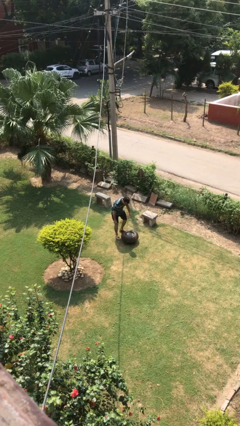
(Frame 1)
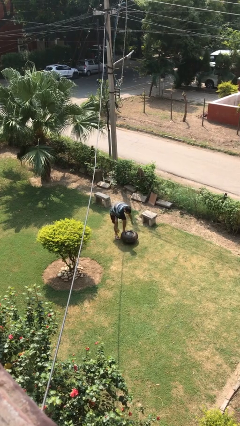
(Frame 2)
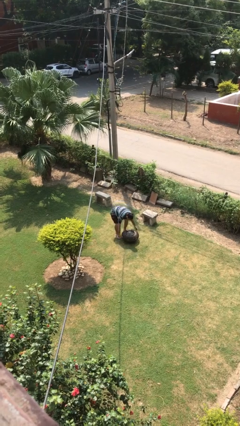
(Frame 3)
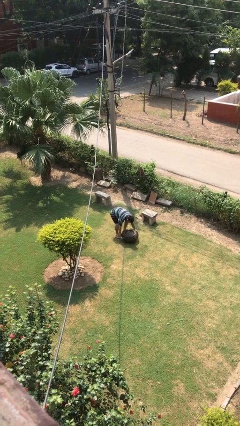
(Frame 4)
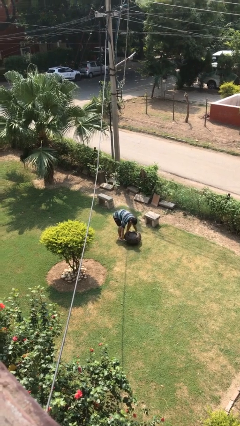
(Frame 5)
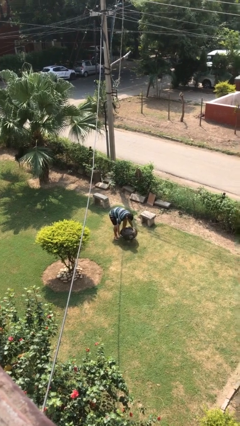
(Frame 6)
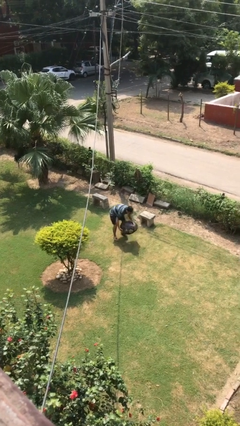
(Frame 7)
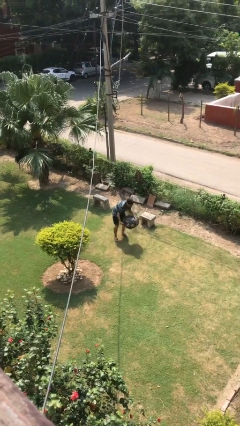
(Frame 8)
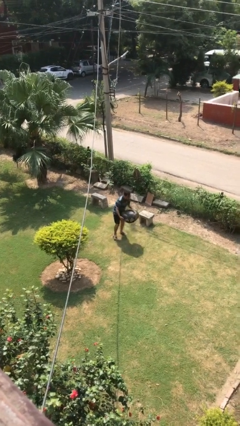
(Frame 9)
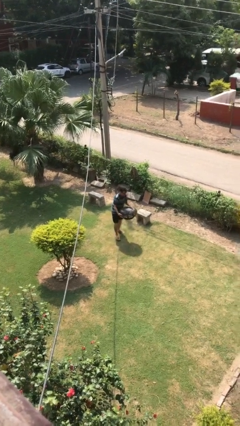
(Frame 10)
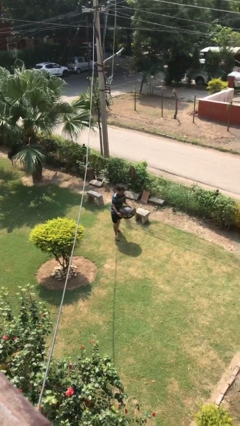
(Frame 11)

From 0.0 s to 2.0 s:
person picks up object from floor

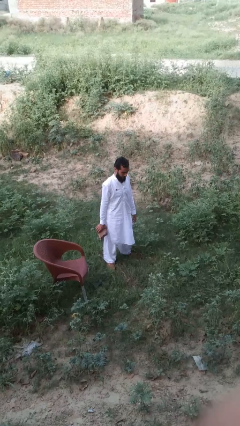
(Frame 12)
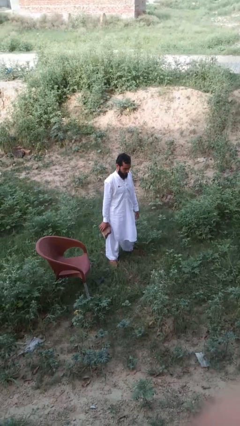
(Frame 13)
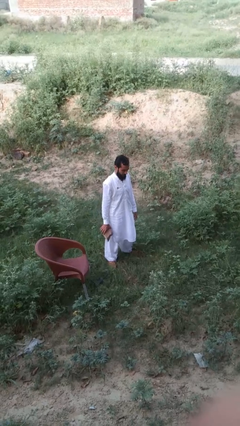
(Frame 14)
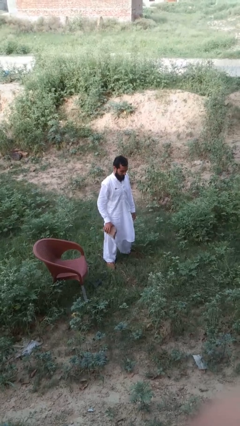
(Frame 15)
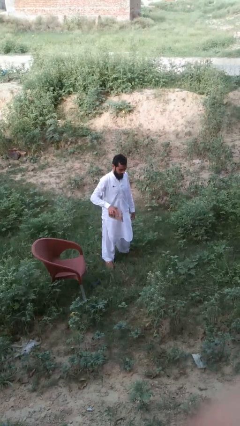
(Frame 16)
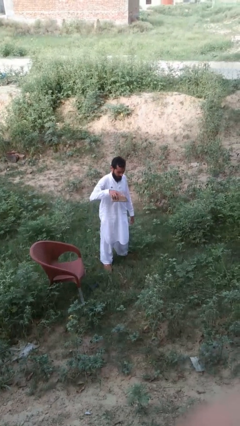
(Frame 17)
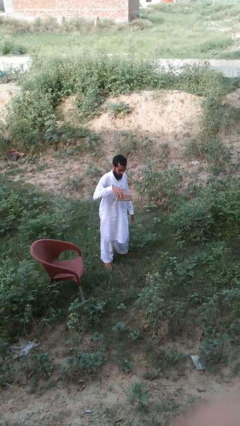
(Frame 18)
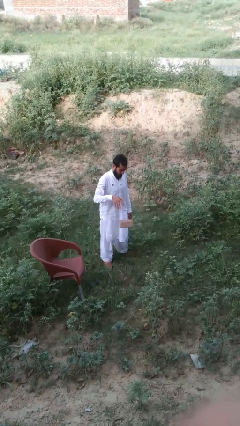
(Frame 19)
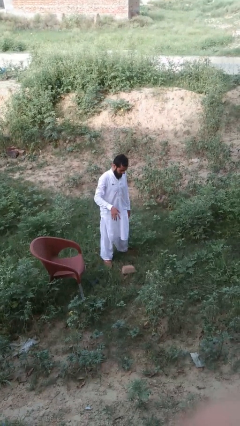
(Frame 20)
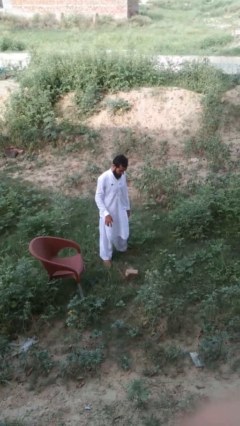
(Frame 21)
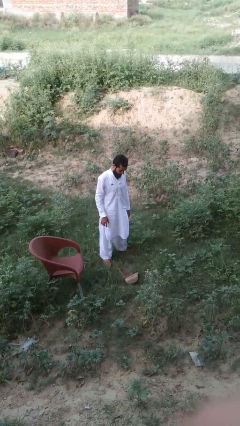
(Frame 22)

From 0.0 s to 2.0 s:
person throws object to ground

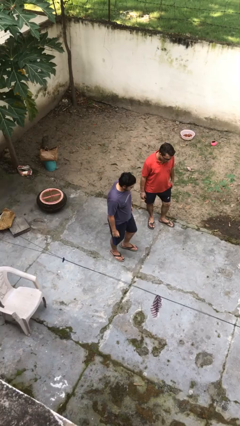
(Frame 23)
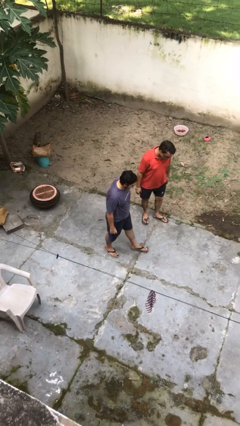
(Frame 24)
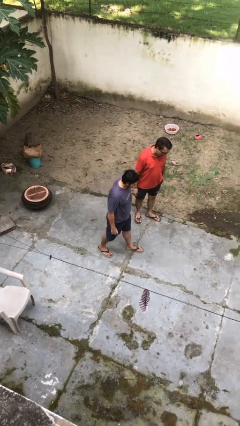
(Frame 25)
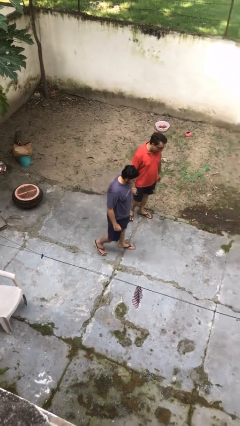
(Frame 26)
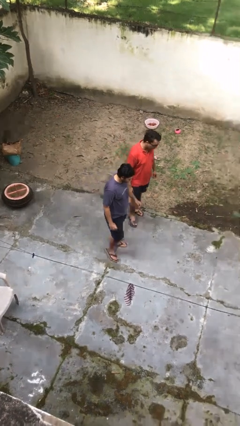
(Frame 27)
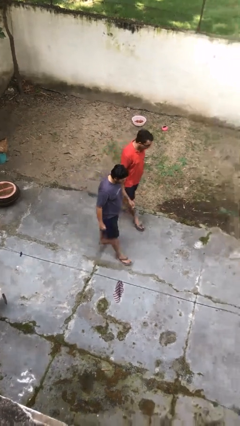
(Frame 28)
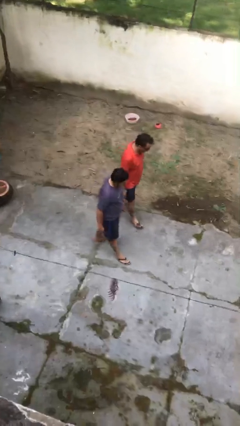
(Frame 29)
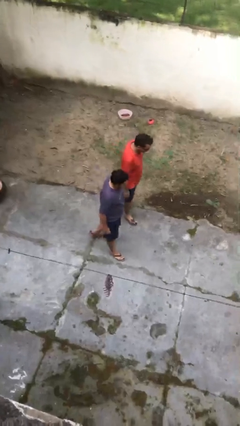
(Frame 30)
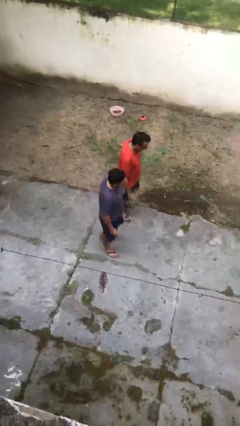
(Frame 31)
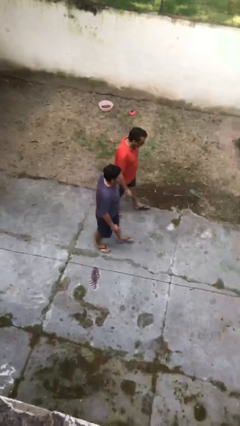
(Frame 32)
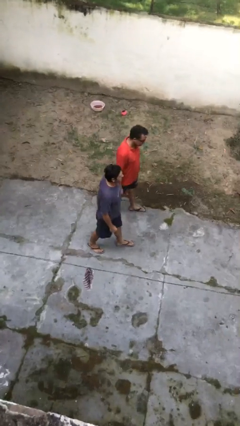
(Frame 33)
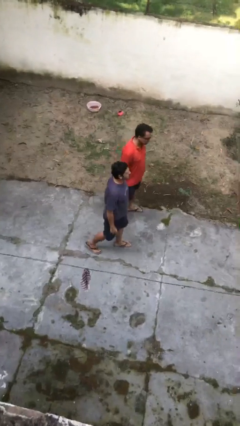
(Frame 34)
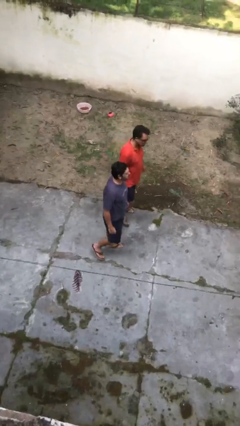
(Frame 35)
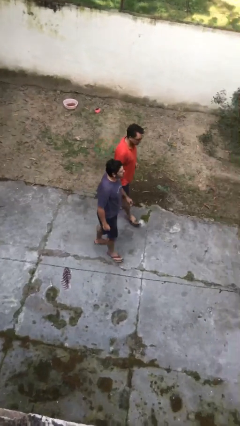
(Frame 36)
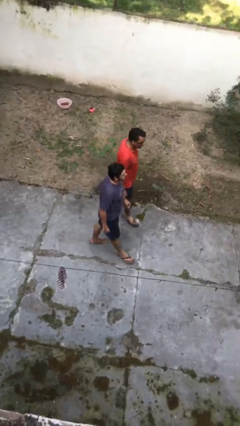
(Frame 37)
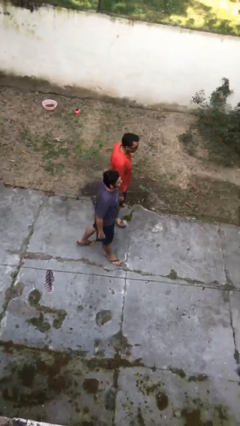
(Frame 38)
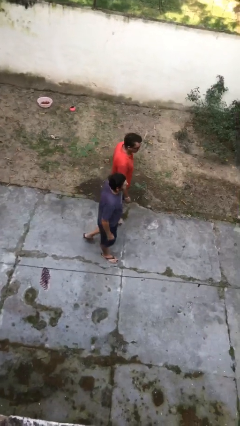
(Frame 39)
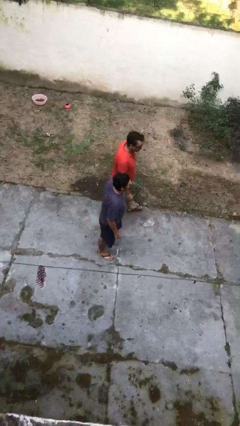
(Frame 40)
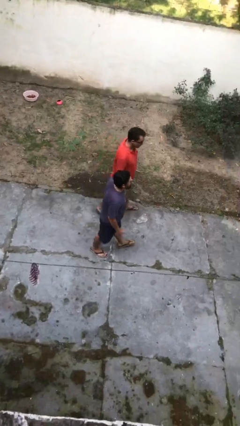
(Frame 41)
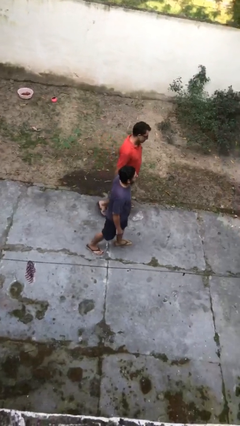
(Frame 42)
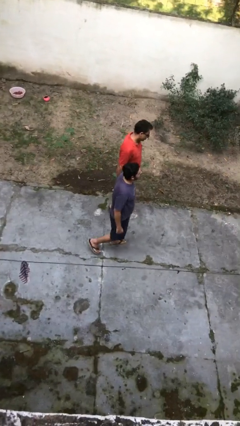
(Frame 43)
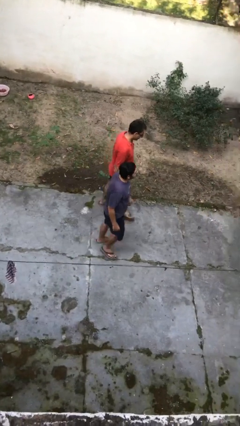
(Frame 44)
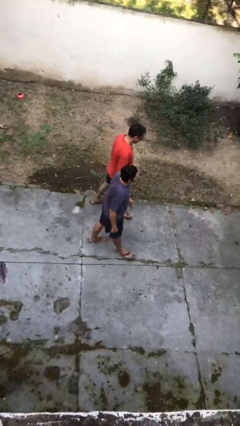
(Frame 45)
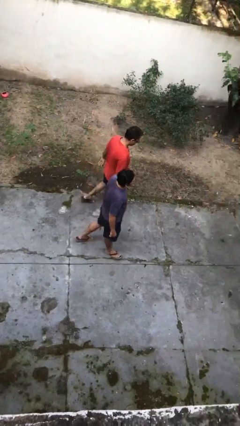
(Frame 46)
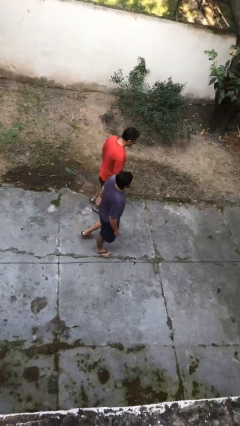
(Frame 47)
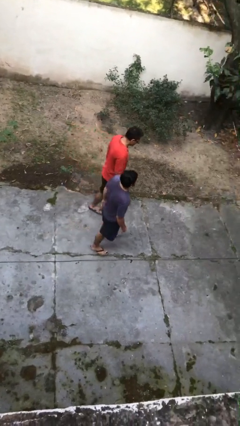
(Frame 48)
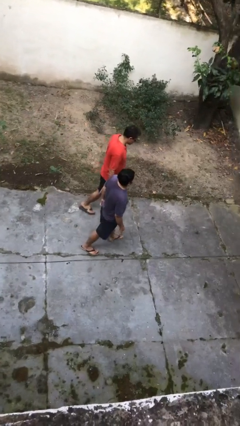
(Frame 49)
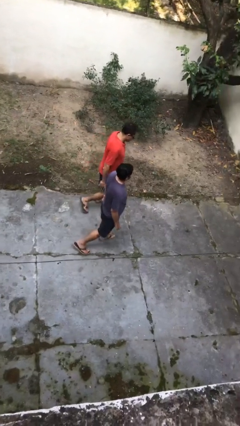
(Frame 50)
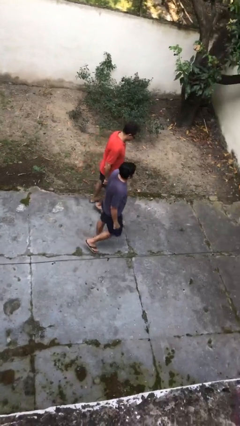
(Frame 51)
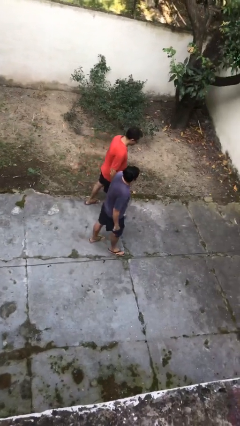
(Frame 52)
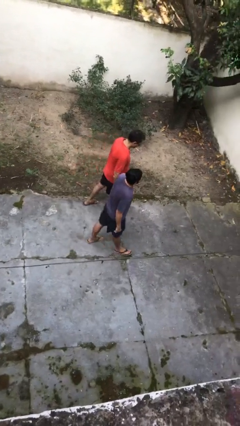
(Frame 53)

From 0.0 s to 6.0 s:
person talks to person

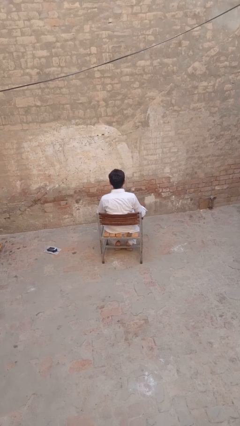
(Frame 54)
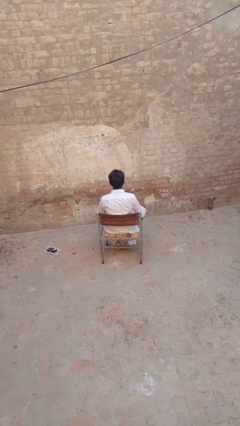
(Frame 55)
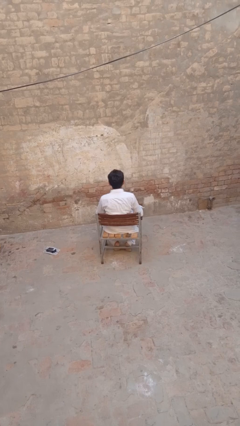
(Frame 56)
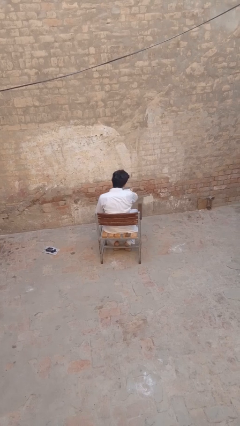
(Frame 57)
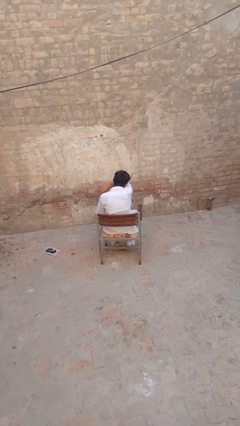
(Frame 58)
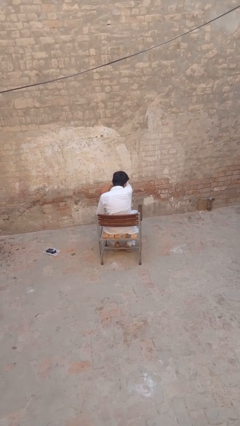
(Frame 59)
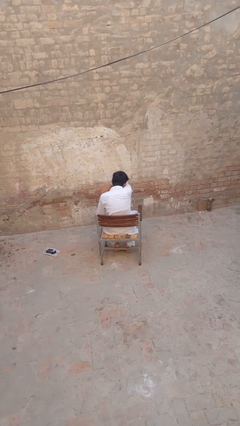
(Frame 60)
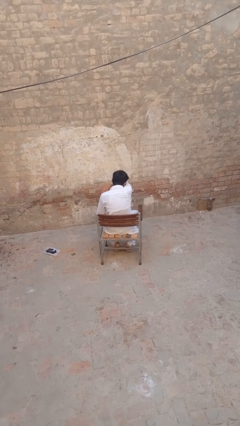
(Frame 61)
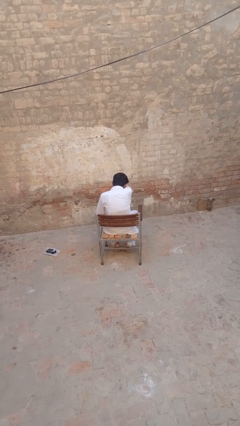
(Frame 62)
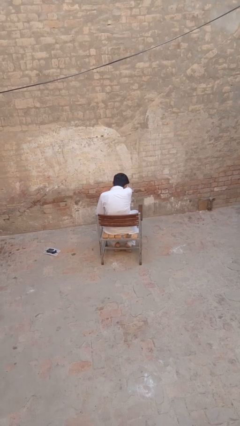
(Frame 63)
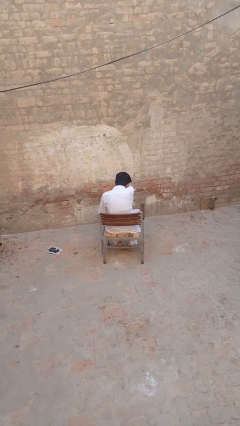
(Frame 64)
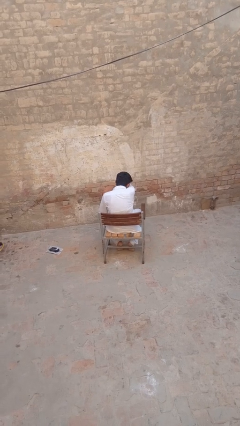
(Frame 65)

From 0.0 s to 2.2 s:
person sneezes into arm

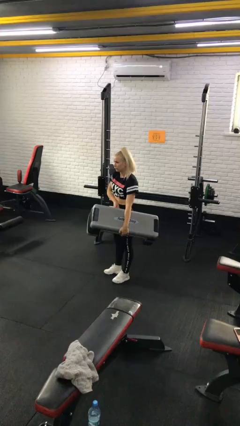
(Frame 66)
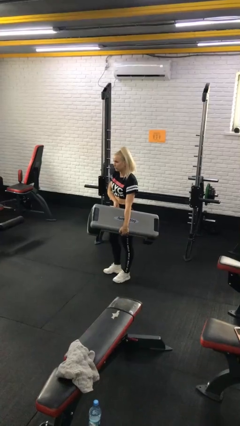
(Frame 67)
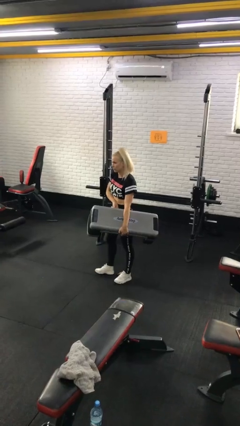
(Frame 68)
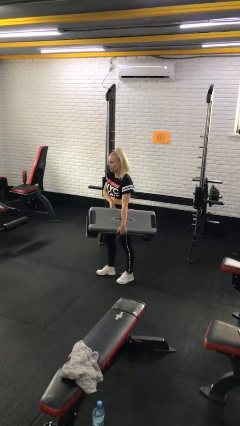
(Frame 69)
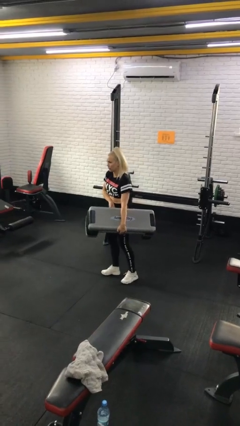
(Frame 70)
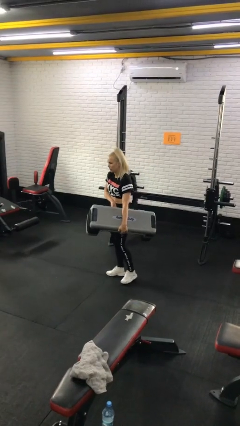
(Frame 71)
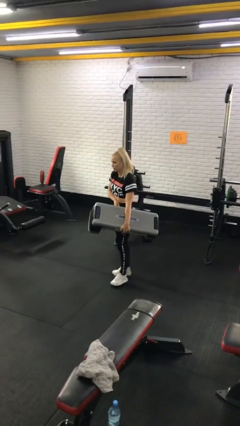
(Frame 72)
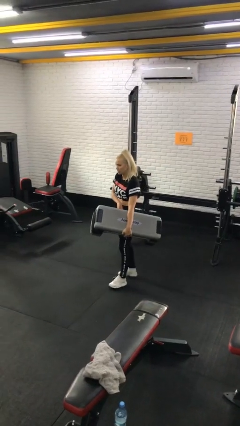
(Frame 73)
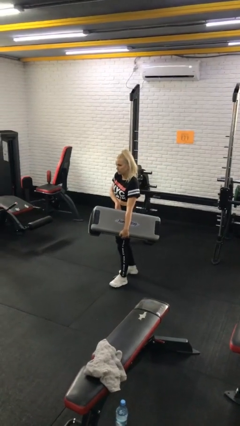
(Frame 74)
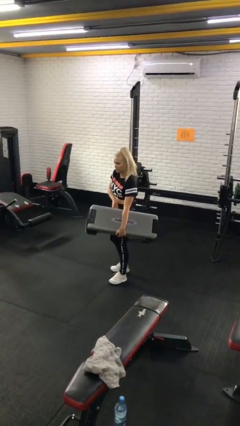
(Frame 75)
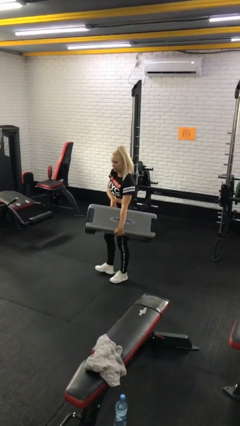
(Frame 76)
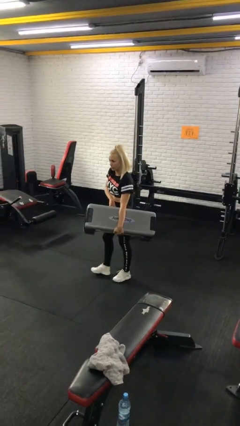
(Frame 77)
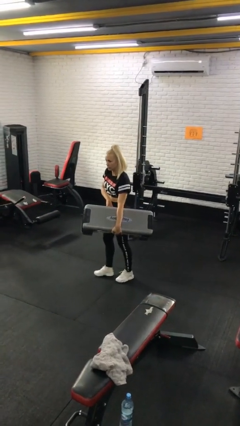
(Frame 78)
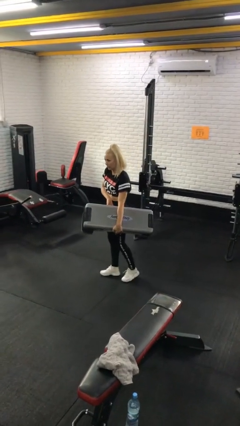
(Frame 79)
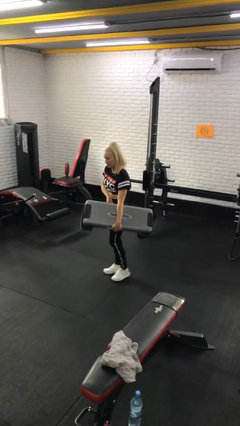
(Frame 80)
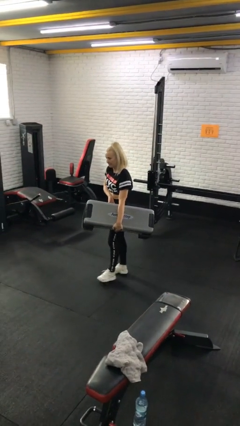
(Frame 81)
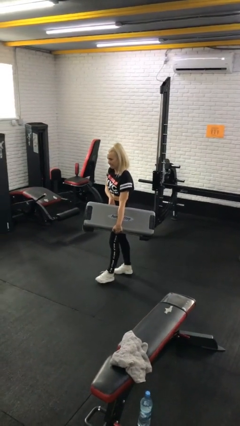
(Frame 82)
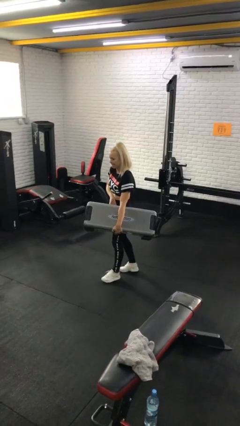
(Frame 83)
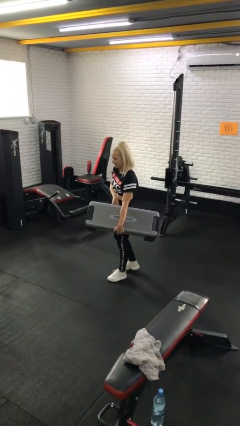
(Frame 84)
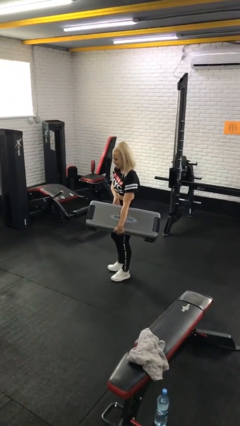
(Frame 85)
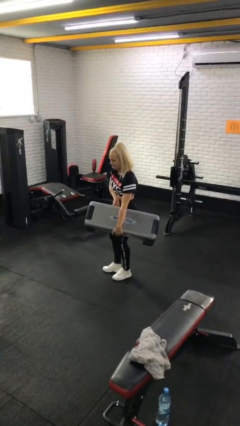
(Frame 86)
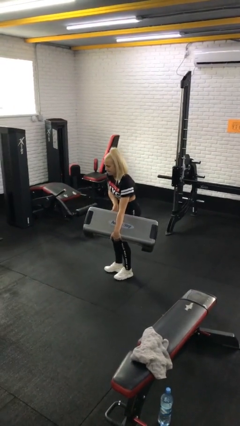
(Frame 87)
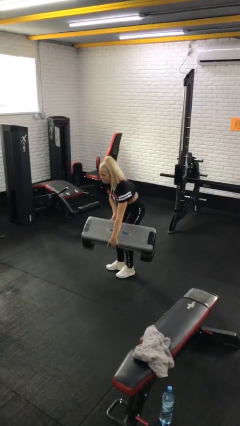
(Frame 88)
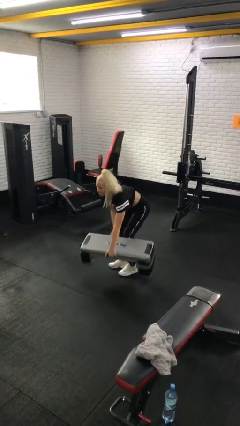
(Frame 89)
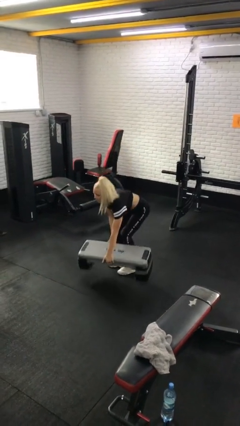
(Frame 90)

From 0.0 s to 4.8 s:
person carries heavy object

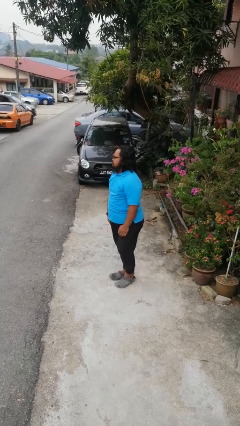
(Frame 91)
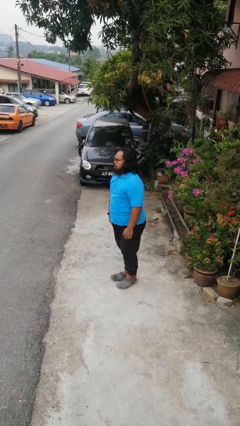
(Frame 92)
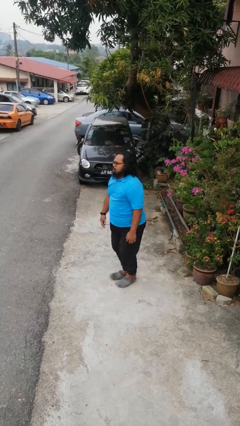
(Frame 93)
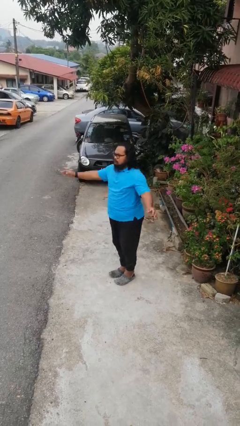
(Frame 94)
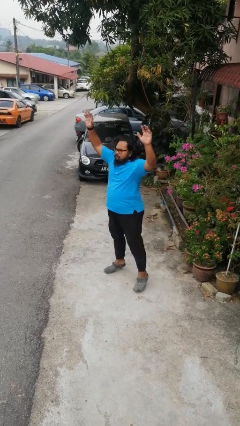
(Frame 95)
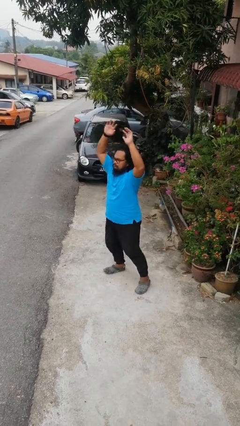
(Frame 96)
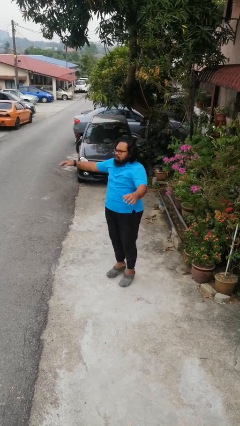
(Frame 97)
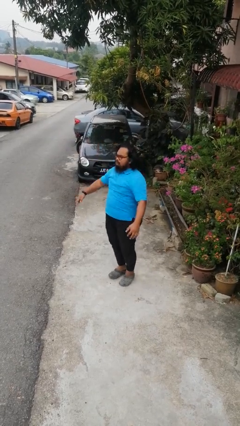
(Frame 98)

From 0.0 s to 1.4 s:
person exercises with jumping jacks
